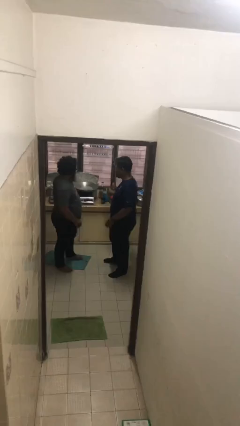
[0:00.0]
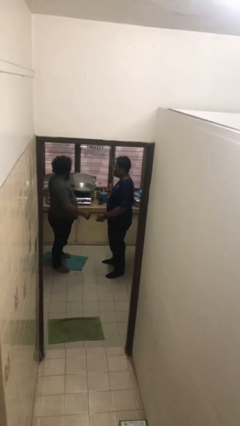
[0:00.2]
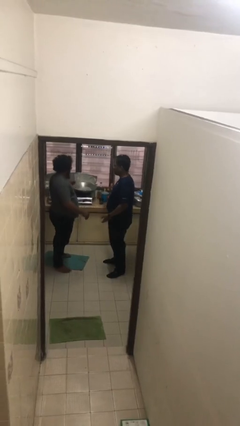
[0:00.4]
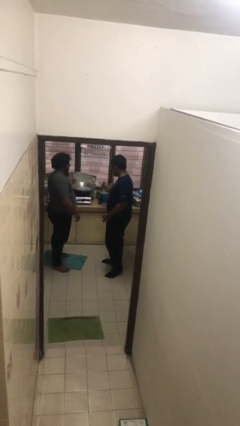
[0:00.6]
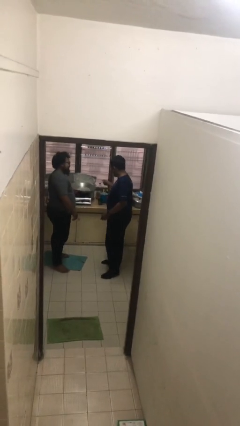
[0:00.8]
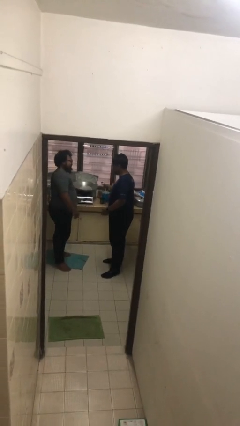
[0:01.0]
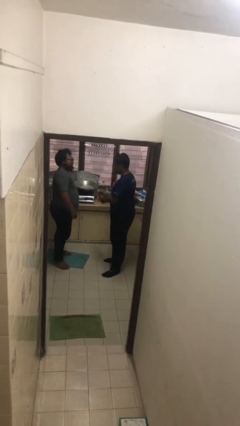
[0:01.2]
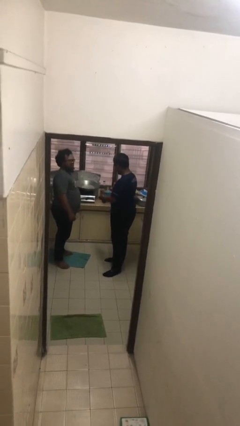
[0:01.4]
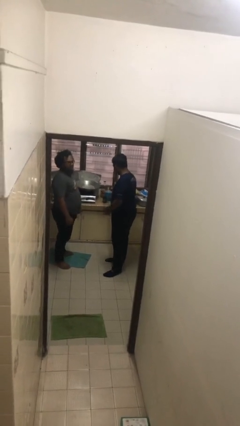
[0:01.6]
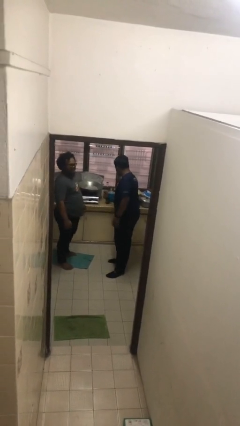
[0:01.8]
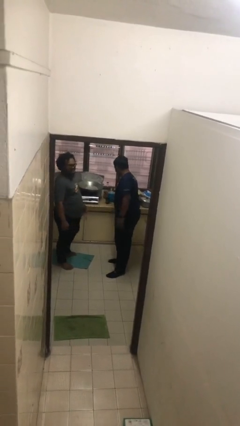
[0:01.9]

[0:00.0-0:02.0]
person talks to person

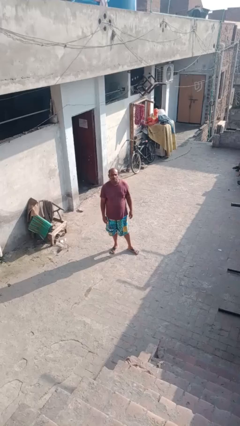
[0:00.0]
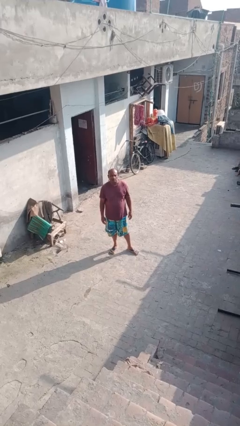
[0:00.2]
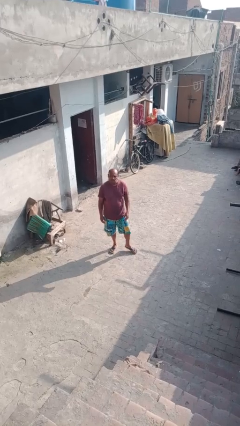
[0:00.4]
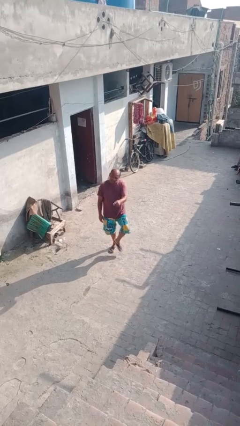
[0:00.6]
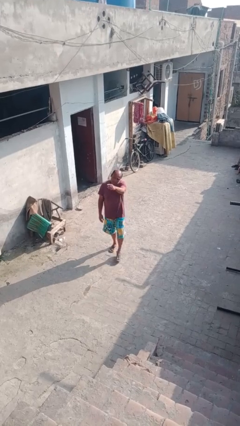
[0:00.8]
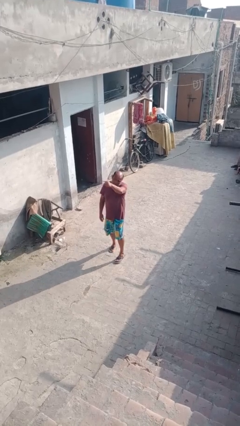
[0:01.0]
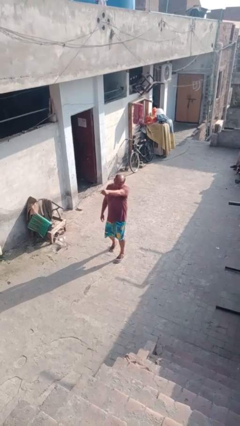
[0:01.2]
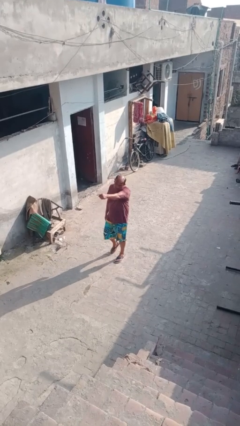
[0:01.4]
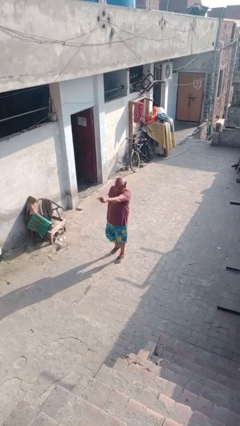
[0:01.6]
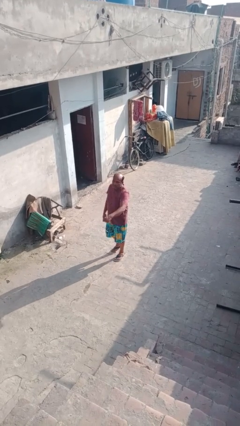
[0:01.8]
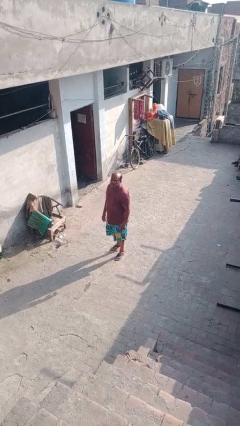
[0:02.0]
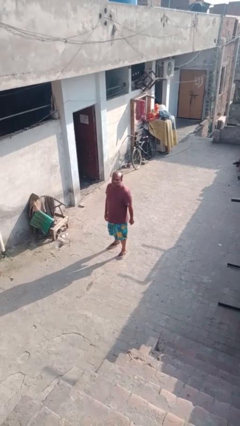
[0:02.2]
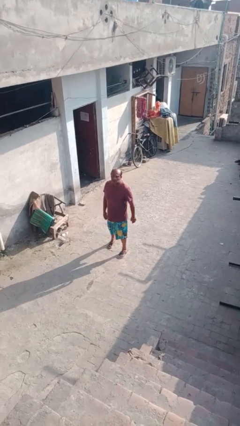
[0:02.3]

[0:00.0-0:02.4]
person points at person

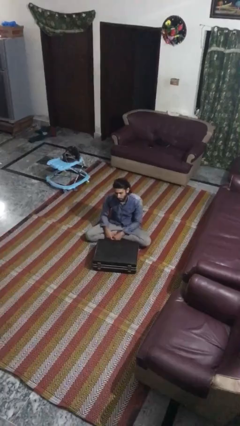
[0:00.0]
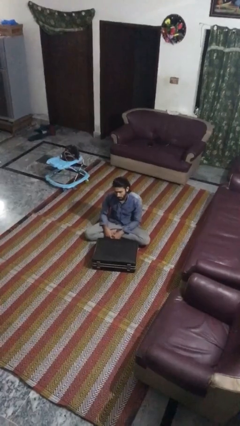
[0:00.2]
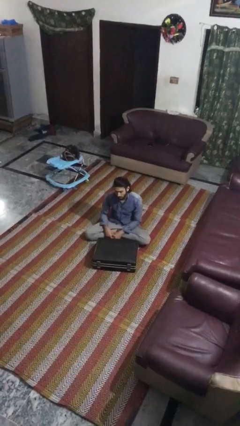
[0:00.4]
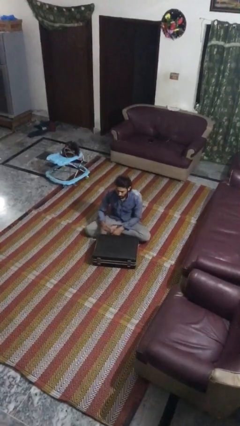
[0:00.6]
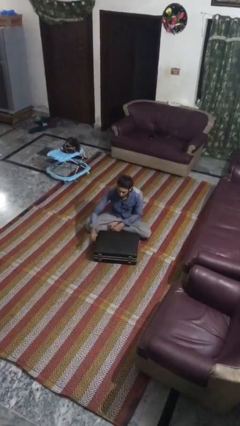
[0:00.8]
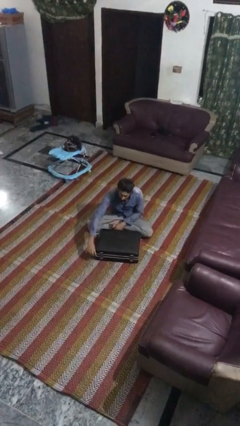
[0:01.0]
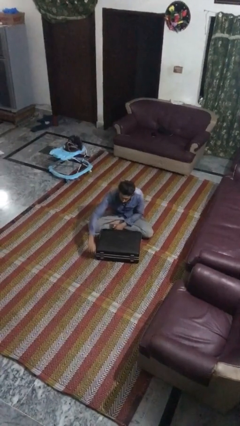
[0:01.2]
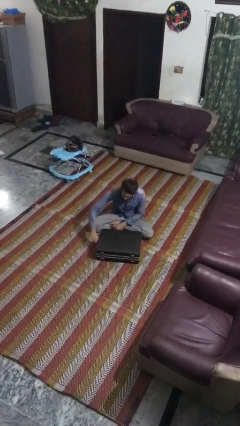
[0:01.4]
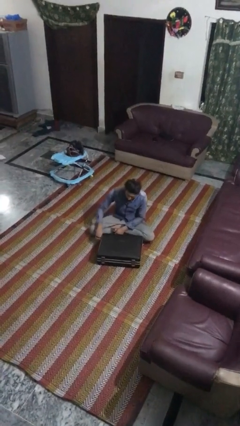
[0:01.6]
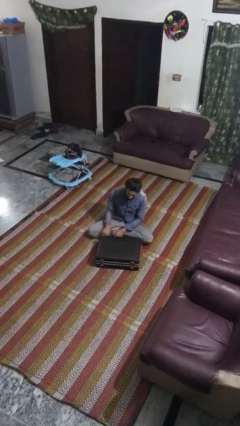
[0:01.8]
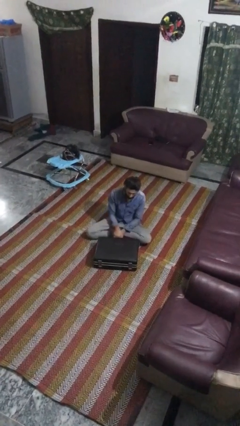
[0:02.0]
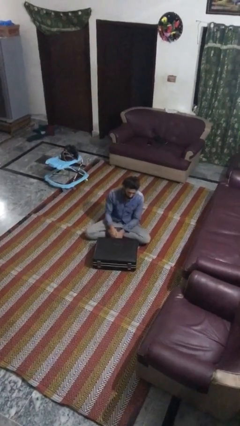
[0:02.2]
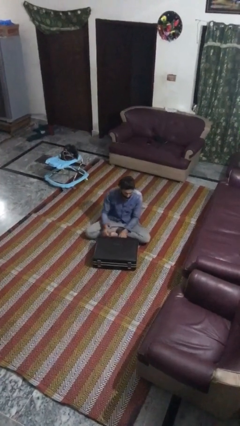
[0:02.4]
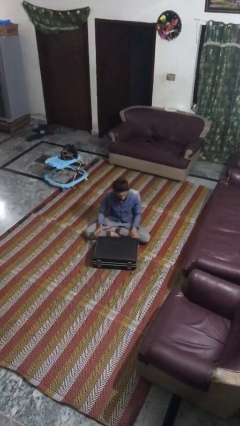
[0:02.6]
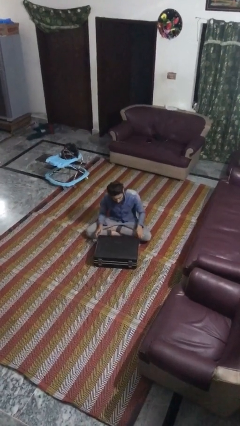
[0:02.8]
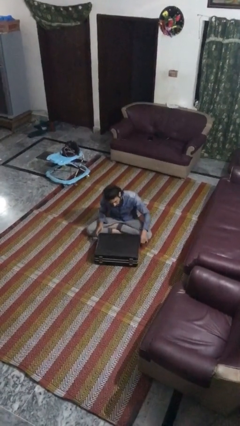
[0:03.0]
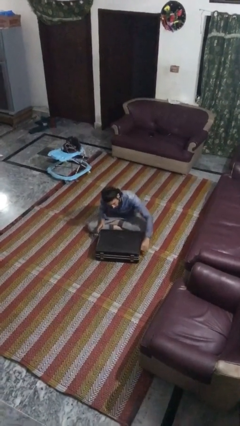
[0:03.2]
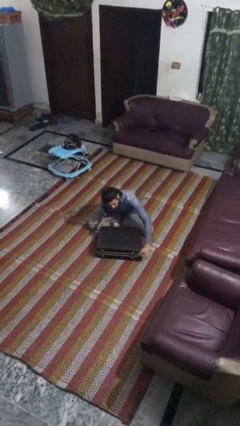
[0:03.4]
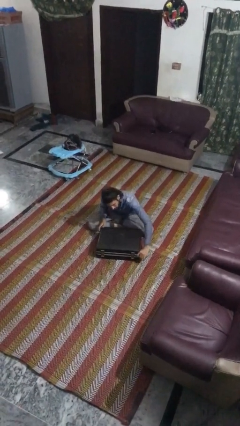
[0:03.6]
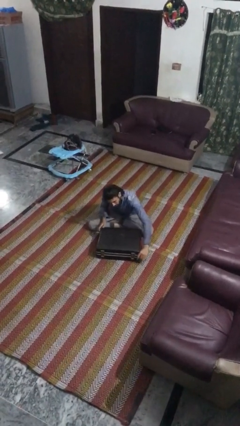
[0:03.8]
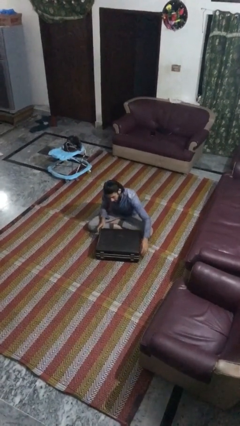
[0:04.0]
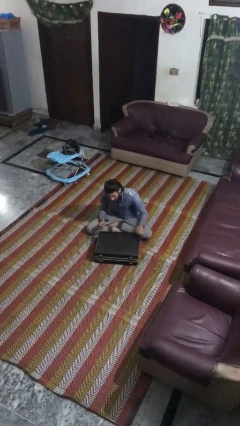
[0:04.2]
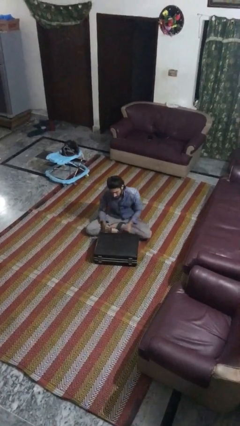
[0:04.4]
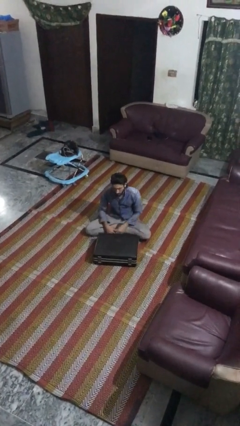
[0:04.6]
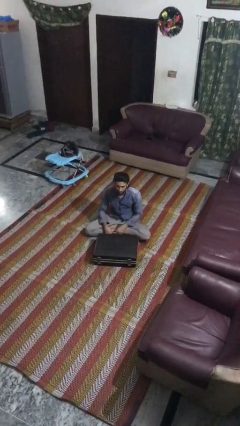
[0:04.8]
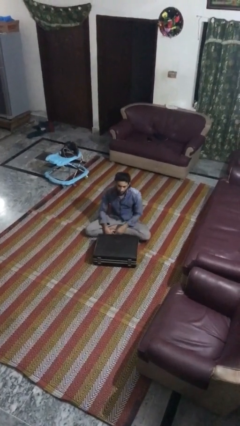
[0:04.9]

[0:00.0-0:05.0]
person opens suitcase

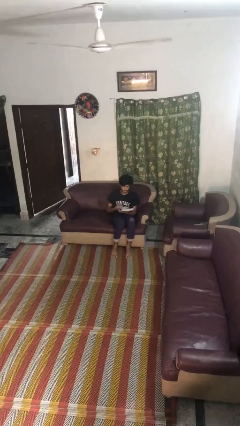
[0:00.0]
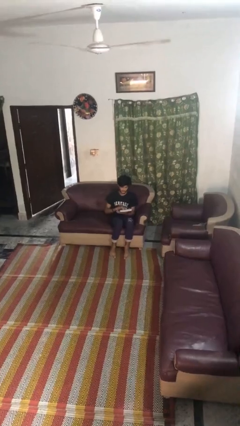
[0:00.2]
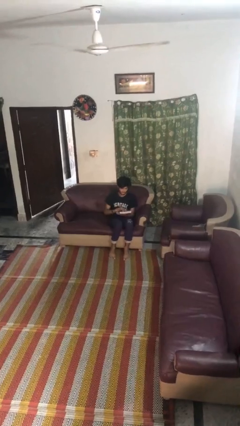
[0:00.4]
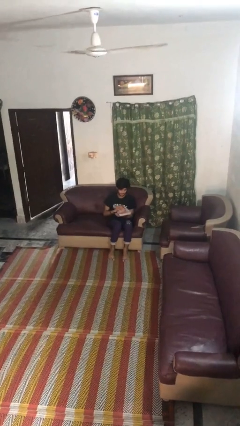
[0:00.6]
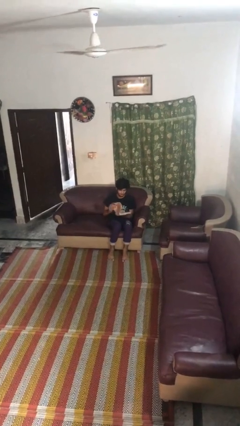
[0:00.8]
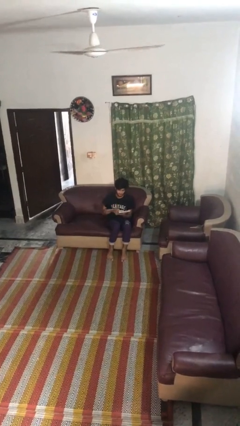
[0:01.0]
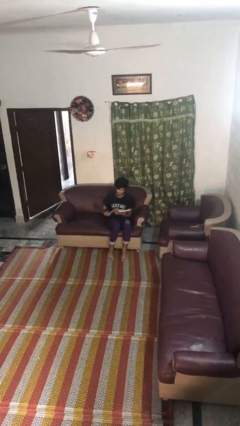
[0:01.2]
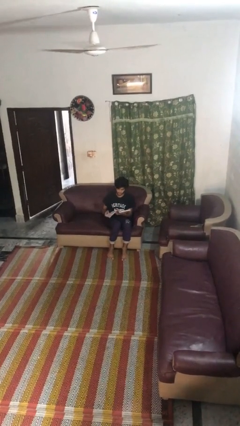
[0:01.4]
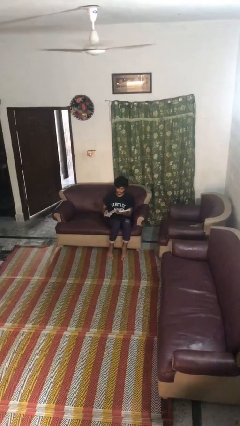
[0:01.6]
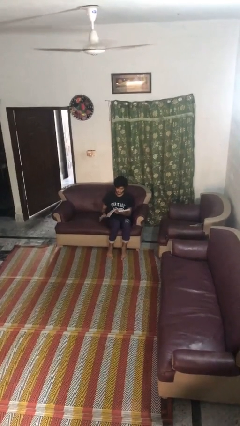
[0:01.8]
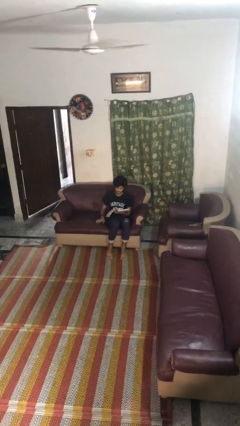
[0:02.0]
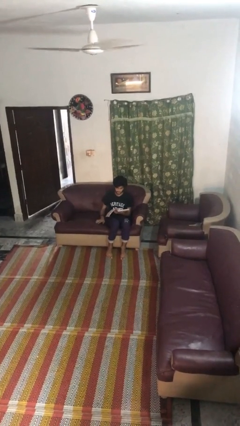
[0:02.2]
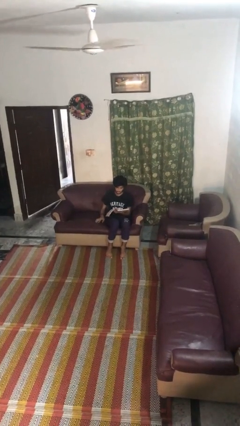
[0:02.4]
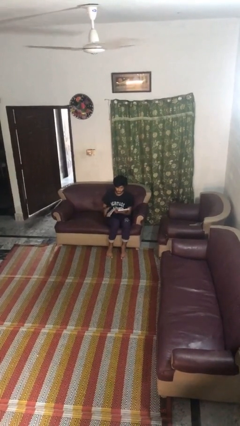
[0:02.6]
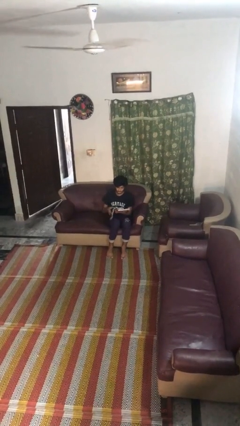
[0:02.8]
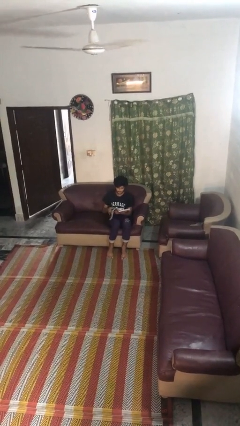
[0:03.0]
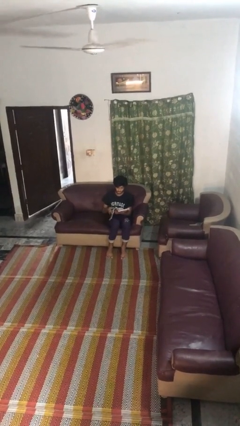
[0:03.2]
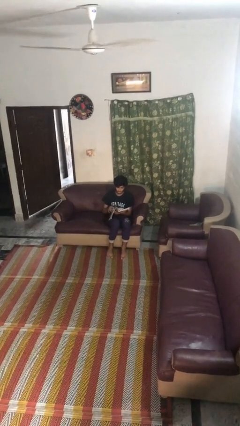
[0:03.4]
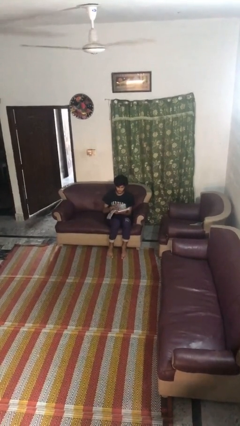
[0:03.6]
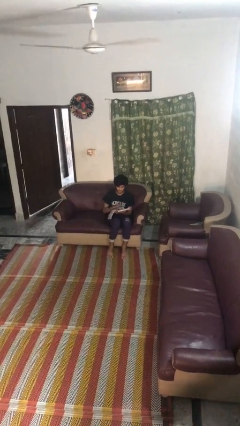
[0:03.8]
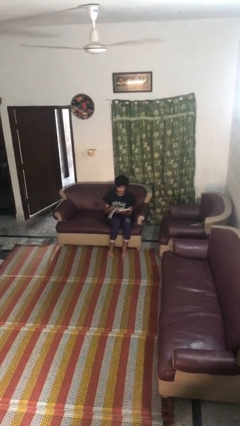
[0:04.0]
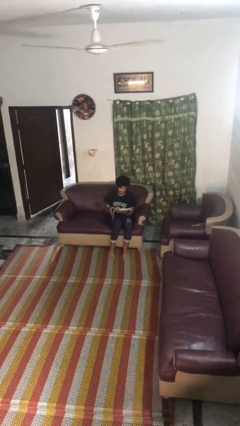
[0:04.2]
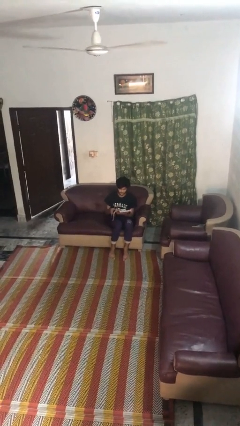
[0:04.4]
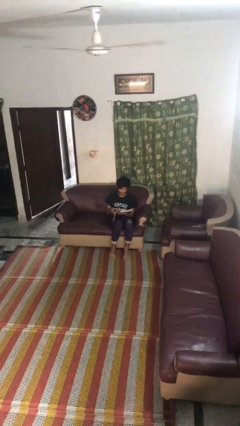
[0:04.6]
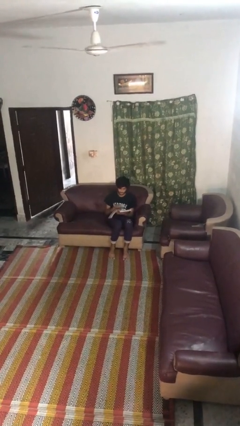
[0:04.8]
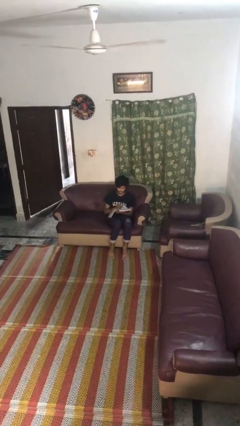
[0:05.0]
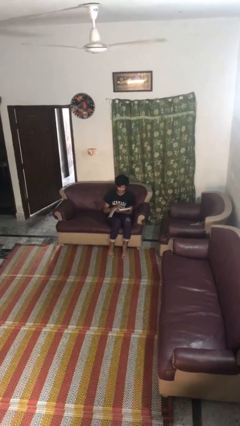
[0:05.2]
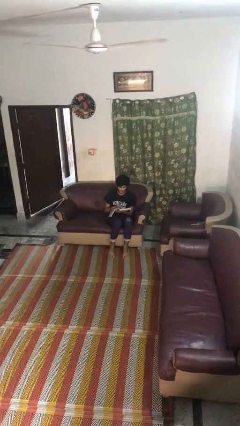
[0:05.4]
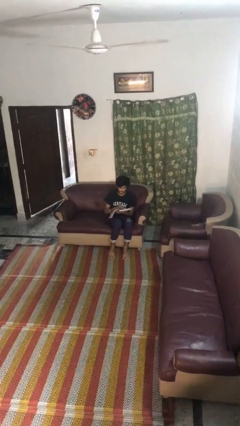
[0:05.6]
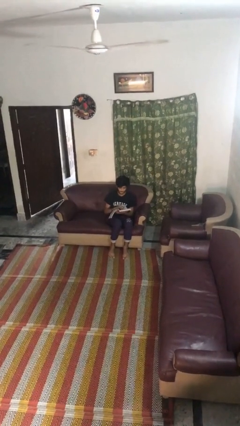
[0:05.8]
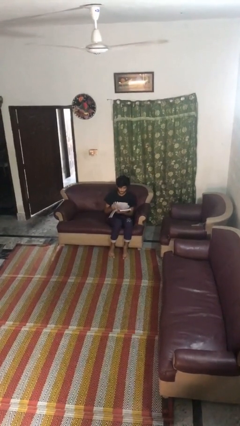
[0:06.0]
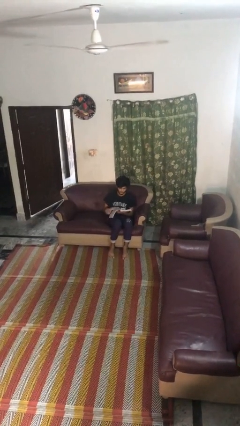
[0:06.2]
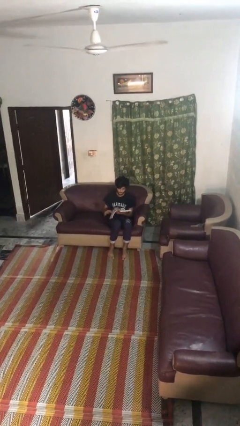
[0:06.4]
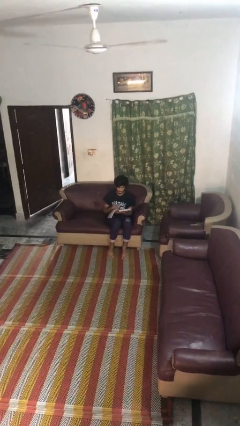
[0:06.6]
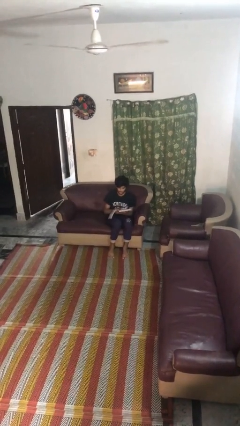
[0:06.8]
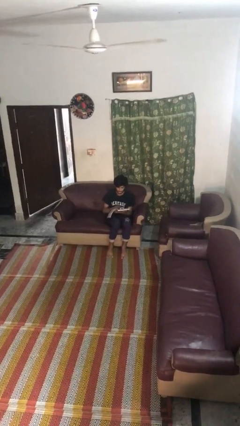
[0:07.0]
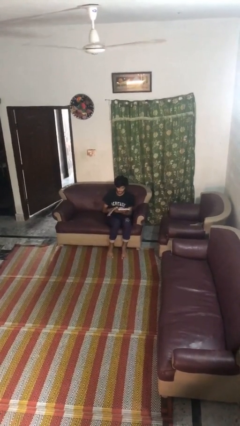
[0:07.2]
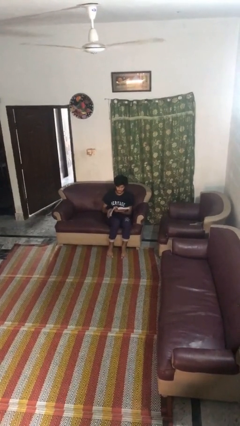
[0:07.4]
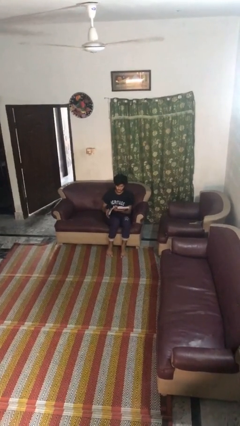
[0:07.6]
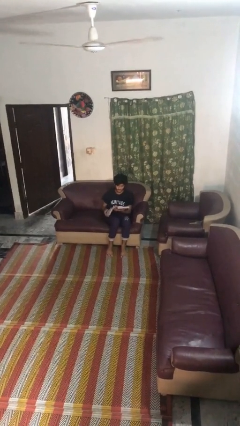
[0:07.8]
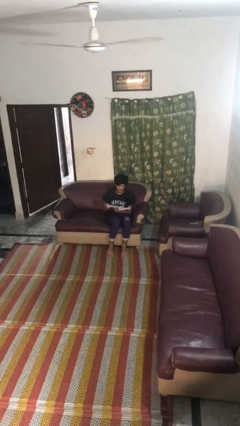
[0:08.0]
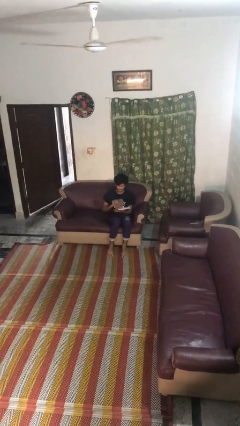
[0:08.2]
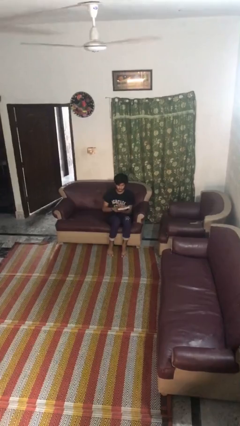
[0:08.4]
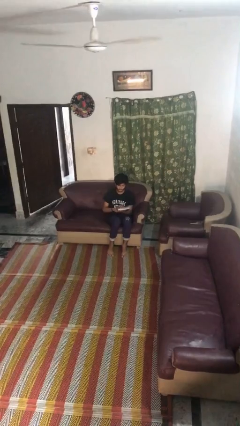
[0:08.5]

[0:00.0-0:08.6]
person reads book
